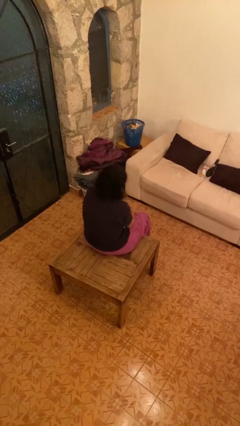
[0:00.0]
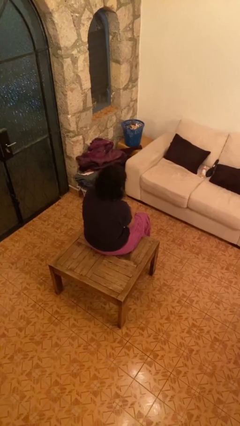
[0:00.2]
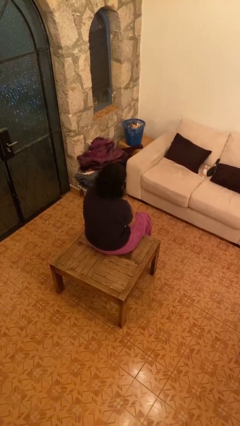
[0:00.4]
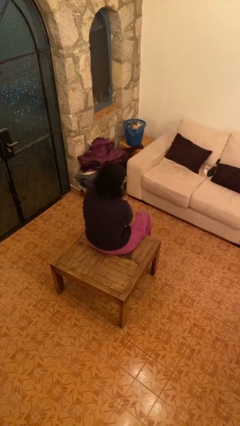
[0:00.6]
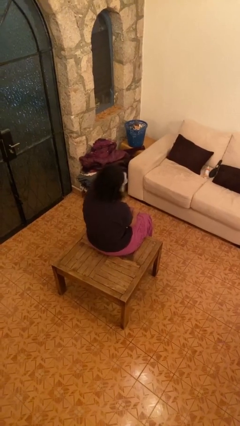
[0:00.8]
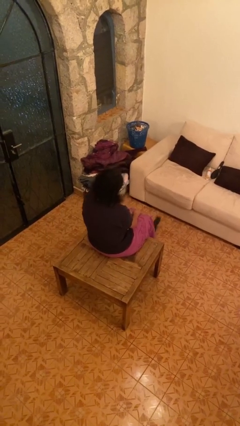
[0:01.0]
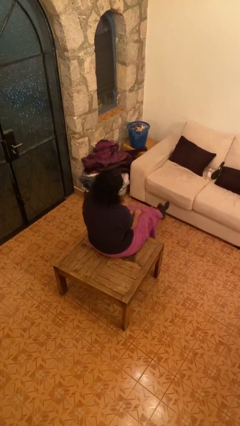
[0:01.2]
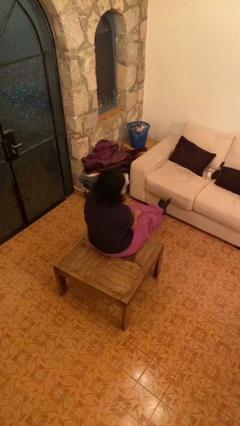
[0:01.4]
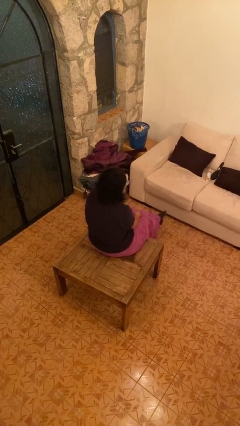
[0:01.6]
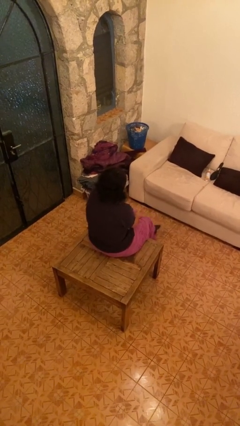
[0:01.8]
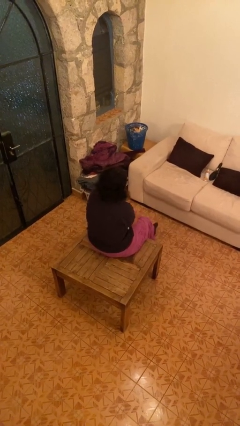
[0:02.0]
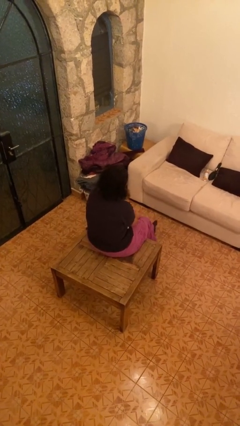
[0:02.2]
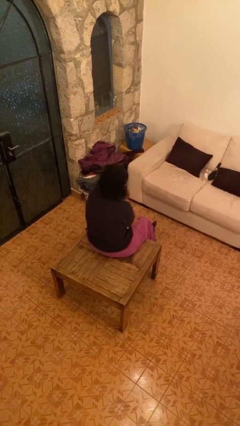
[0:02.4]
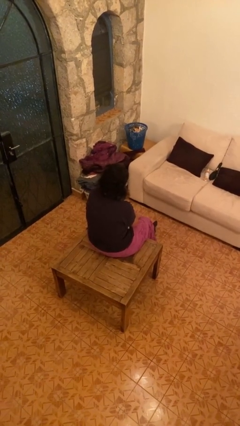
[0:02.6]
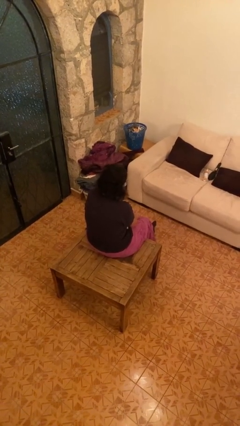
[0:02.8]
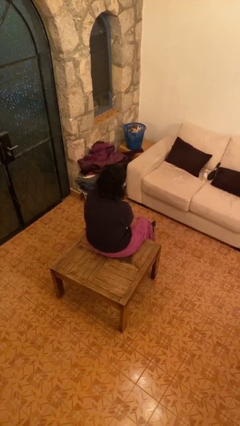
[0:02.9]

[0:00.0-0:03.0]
person crosses legs

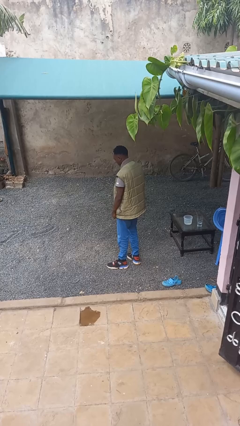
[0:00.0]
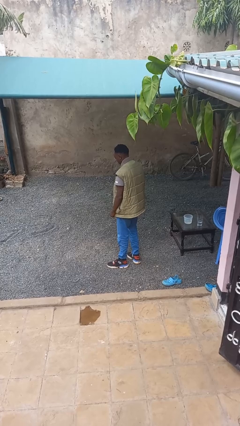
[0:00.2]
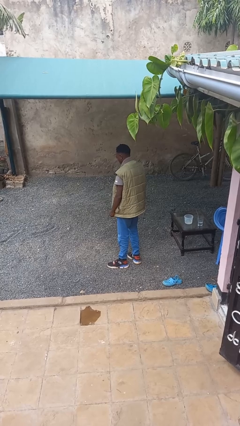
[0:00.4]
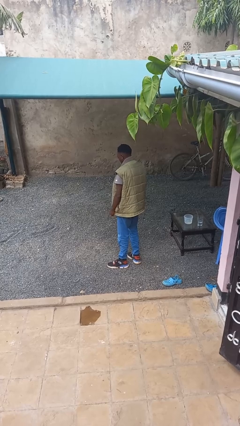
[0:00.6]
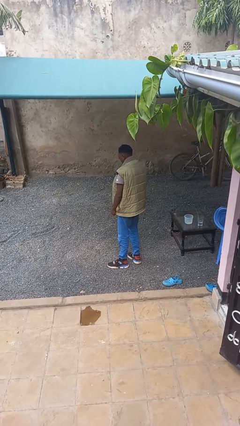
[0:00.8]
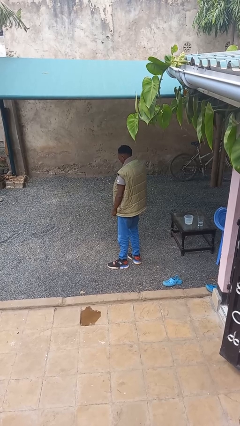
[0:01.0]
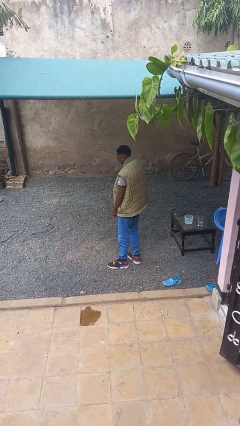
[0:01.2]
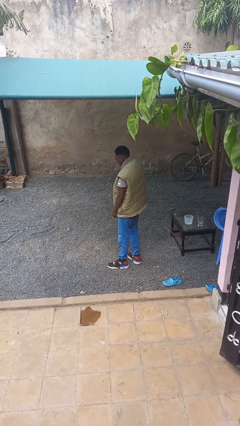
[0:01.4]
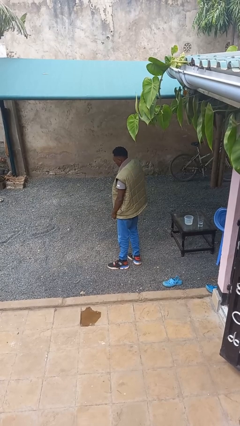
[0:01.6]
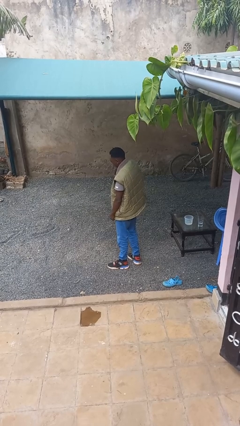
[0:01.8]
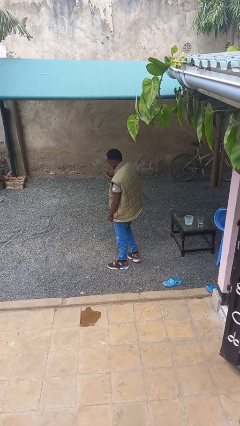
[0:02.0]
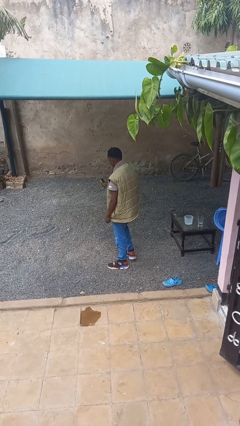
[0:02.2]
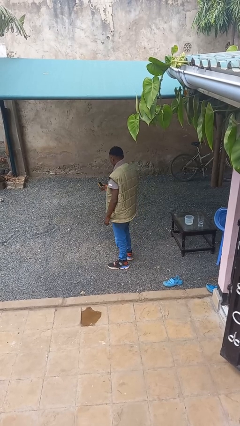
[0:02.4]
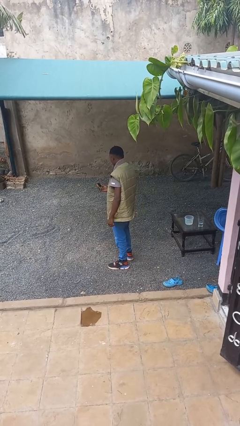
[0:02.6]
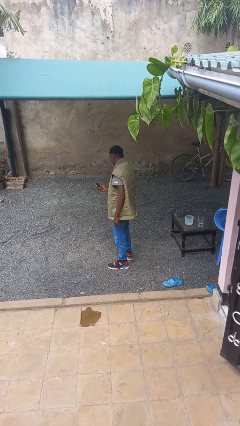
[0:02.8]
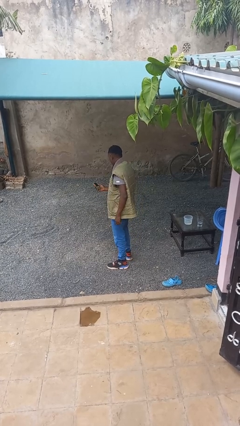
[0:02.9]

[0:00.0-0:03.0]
person takes phone from pocket

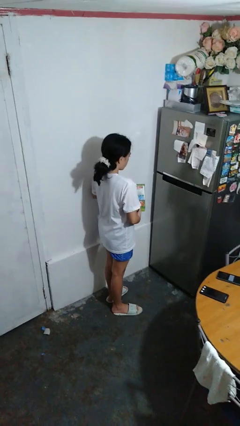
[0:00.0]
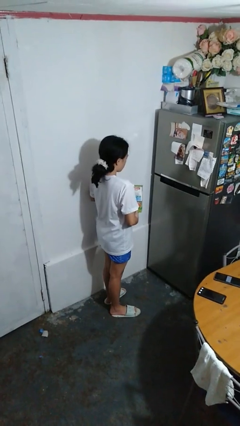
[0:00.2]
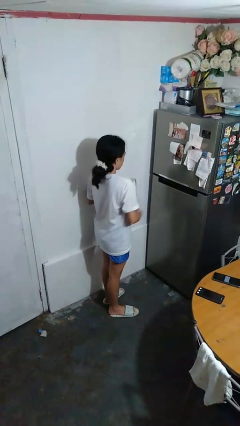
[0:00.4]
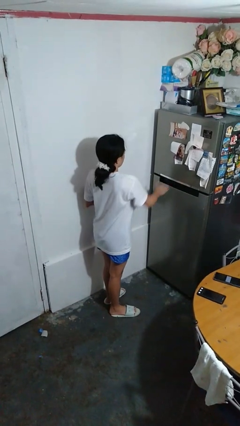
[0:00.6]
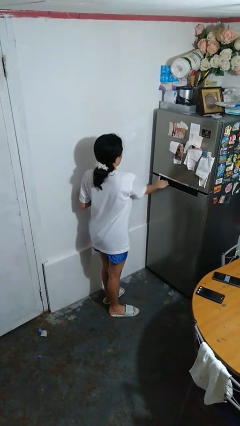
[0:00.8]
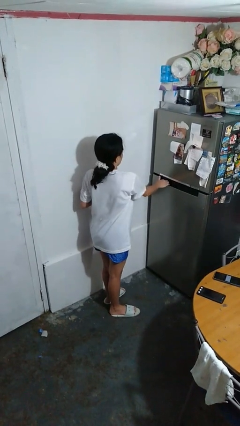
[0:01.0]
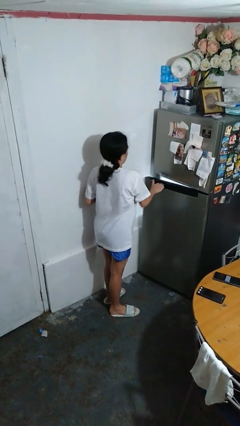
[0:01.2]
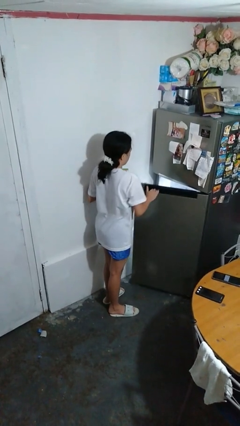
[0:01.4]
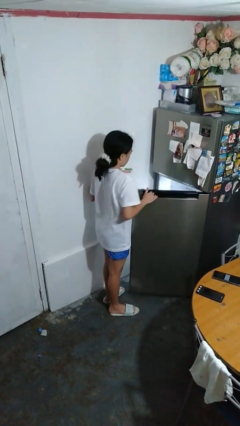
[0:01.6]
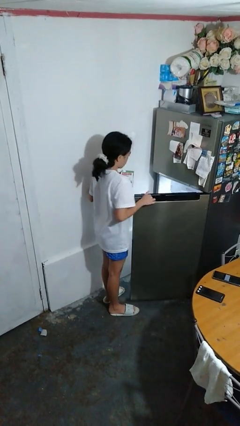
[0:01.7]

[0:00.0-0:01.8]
person opens refrigerator

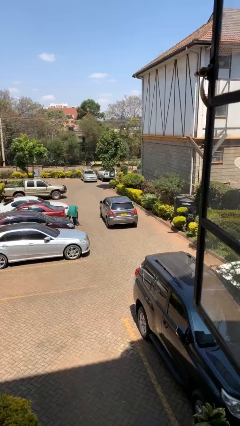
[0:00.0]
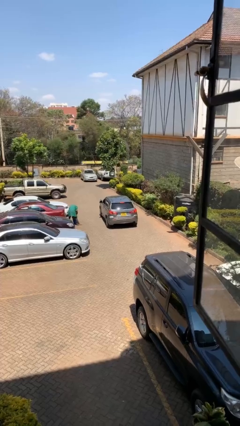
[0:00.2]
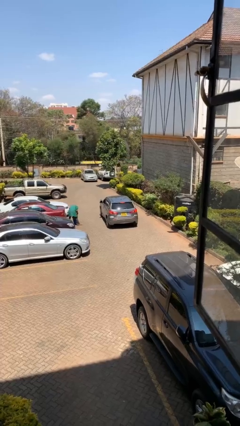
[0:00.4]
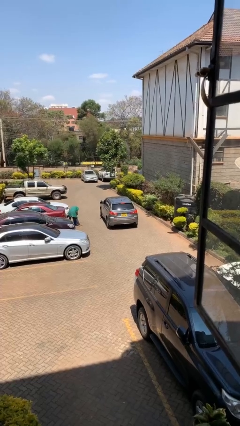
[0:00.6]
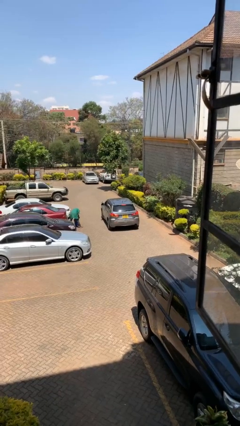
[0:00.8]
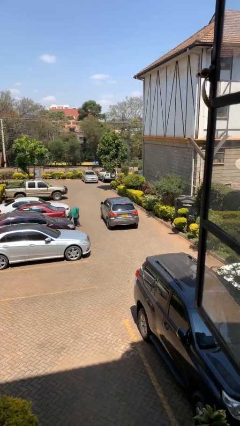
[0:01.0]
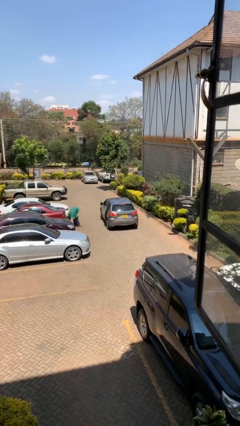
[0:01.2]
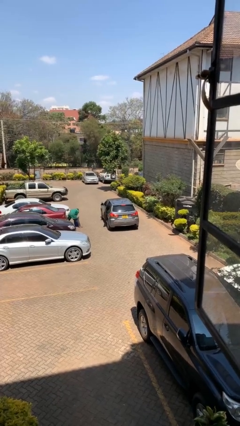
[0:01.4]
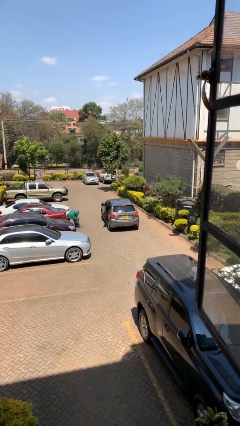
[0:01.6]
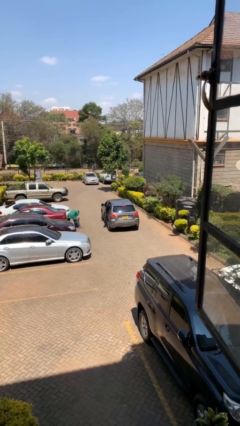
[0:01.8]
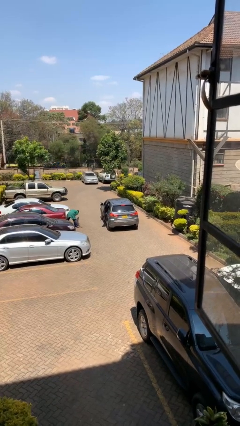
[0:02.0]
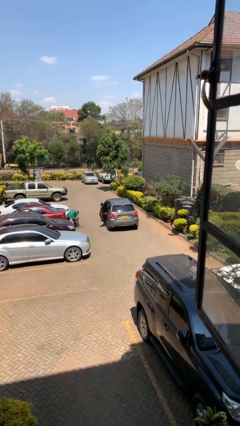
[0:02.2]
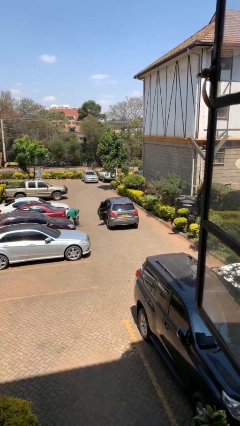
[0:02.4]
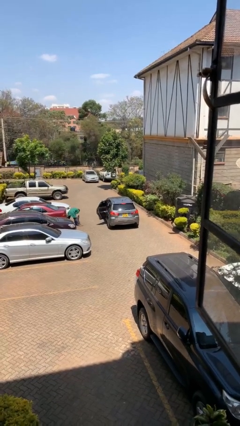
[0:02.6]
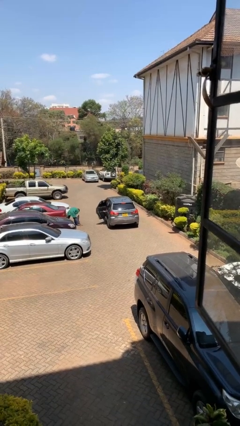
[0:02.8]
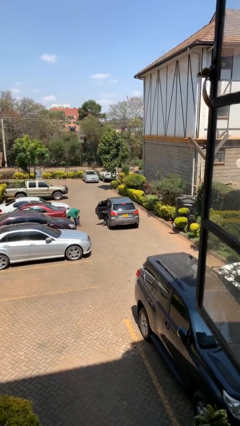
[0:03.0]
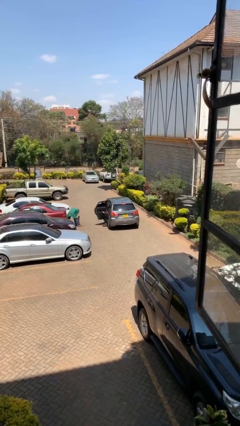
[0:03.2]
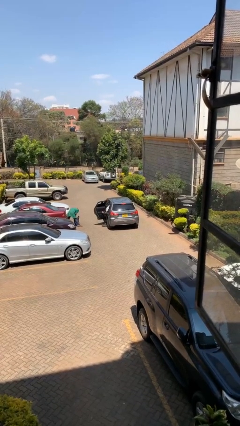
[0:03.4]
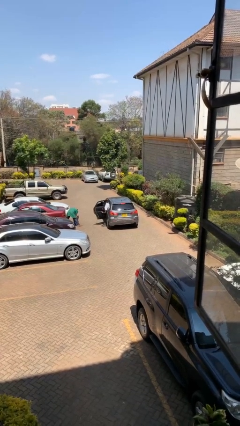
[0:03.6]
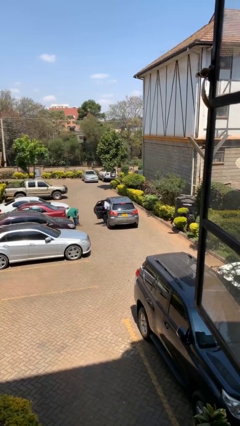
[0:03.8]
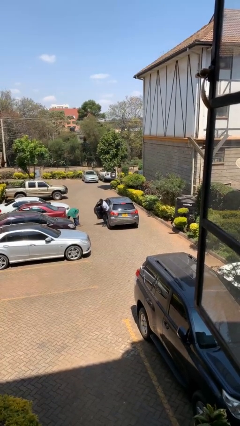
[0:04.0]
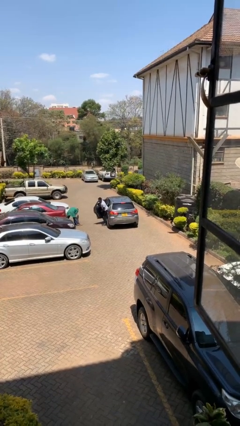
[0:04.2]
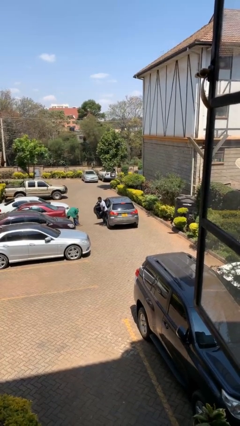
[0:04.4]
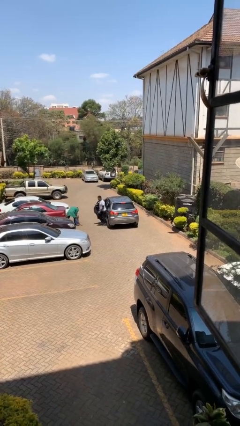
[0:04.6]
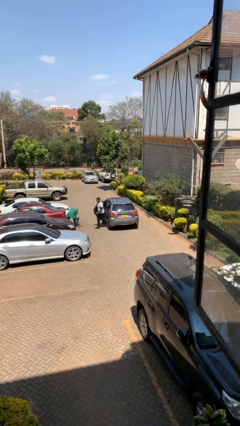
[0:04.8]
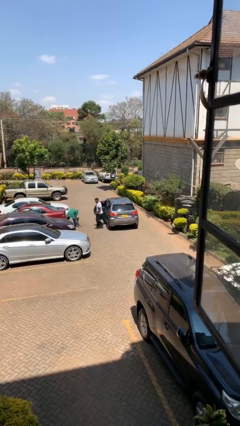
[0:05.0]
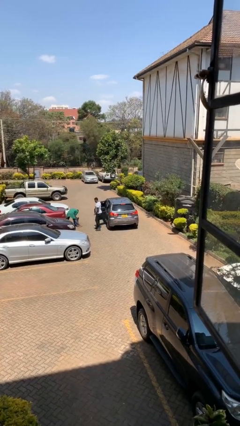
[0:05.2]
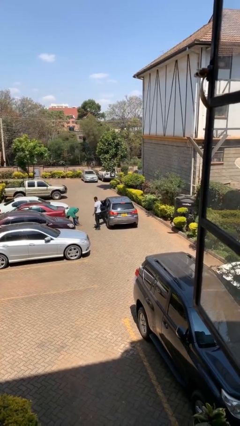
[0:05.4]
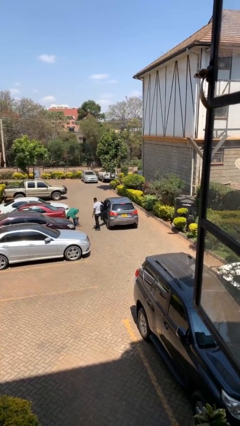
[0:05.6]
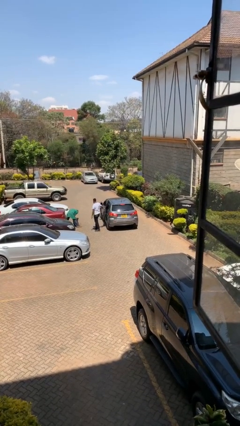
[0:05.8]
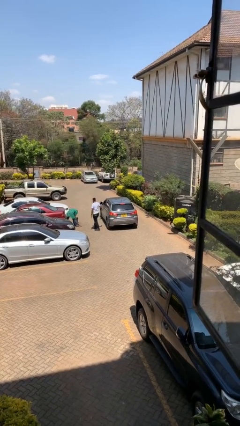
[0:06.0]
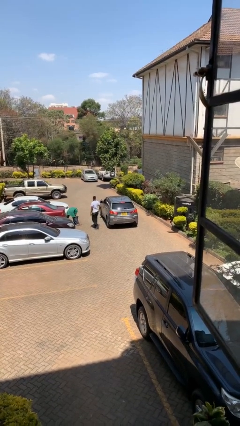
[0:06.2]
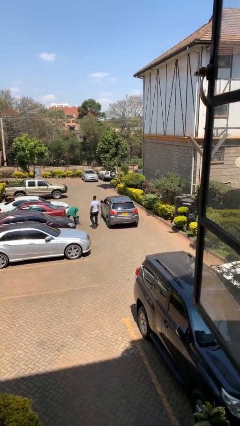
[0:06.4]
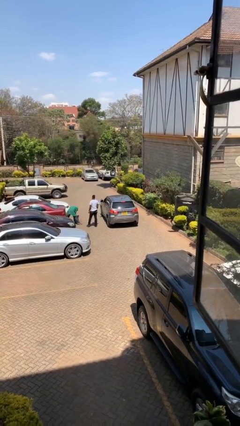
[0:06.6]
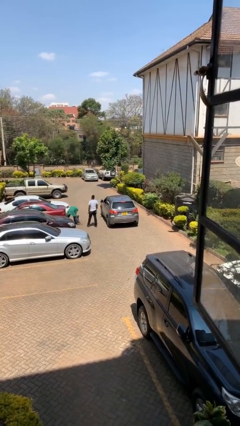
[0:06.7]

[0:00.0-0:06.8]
car drops off person

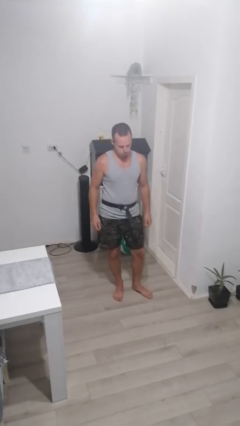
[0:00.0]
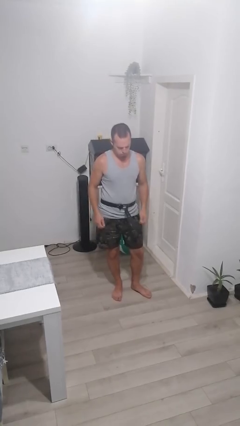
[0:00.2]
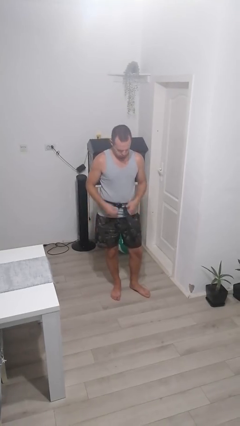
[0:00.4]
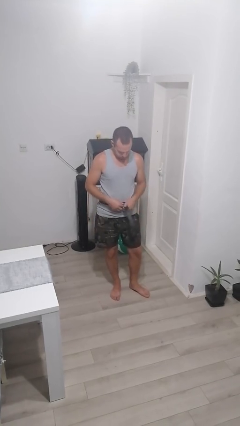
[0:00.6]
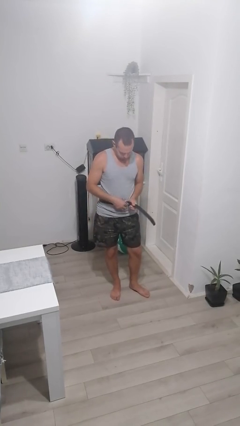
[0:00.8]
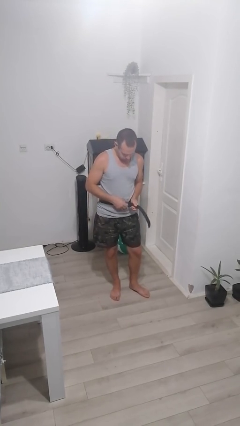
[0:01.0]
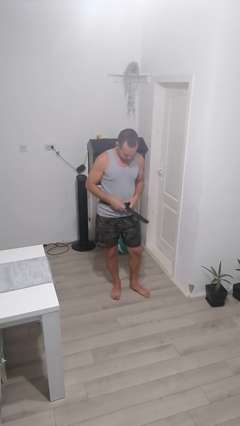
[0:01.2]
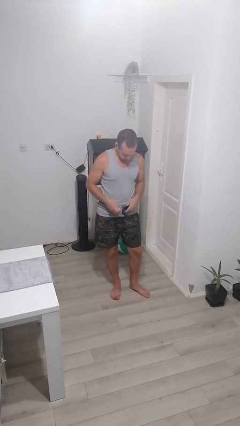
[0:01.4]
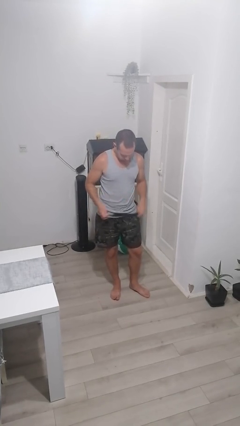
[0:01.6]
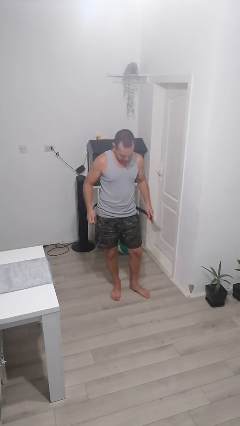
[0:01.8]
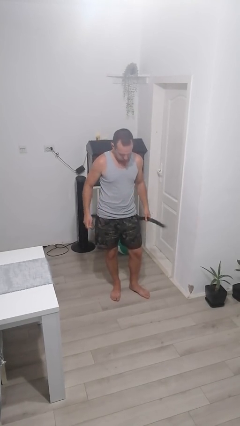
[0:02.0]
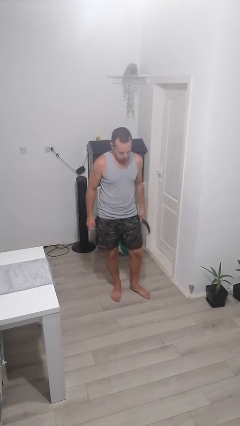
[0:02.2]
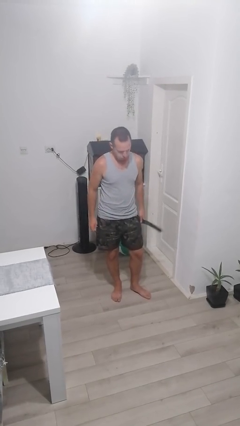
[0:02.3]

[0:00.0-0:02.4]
person takes off belt

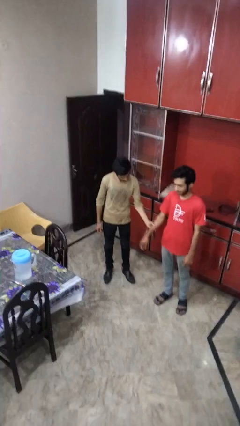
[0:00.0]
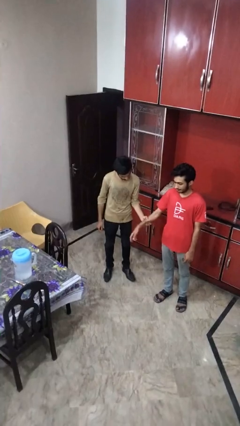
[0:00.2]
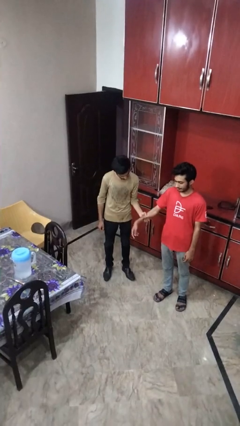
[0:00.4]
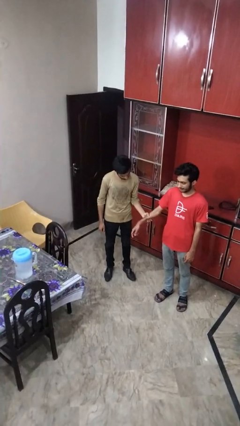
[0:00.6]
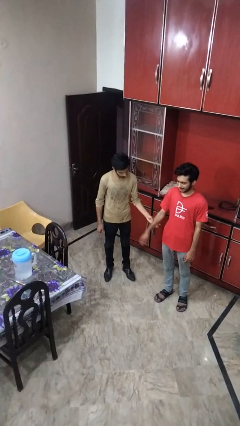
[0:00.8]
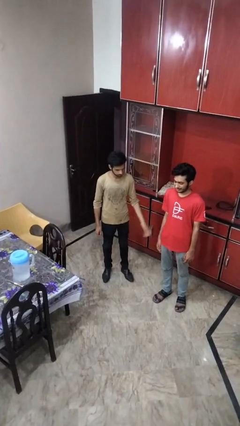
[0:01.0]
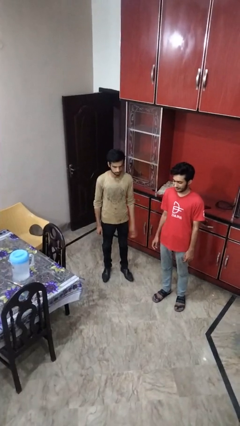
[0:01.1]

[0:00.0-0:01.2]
person grabs person by forearm
